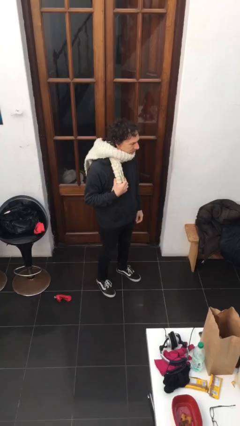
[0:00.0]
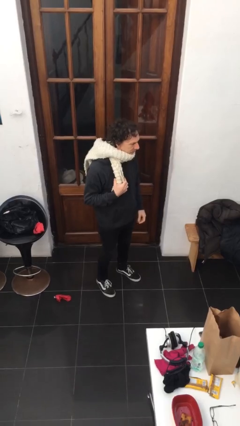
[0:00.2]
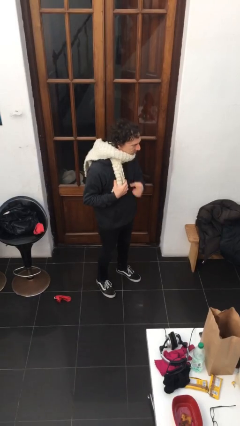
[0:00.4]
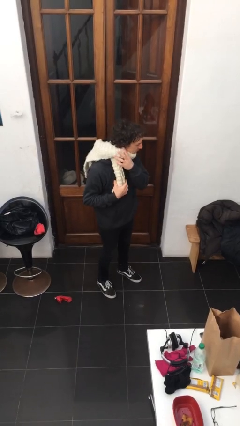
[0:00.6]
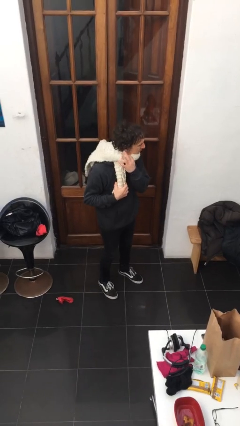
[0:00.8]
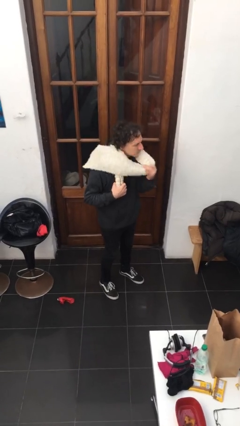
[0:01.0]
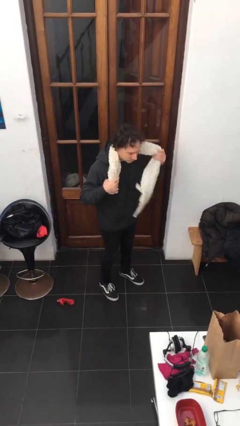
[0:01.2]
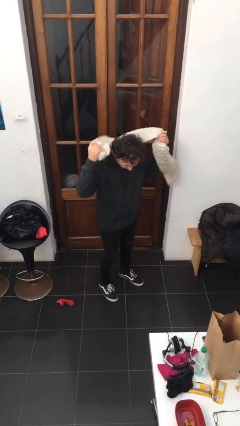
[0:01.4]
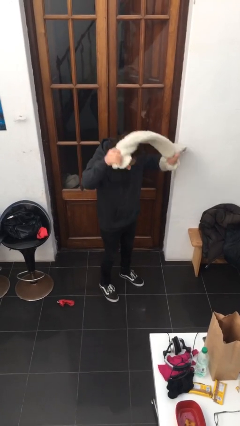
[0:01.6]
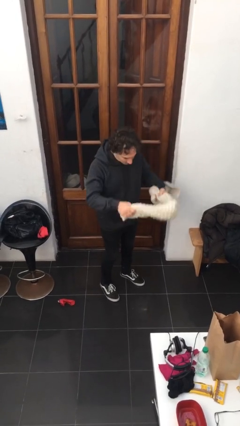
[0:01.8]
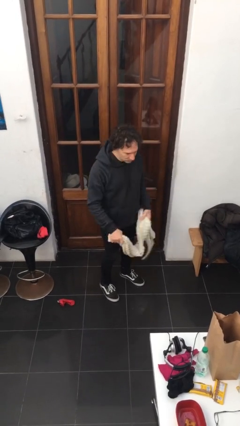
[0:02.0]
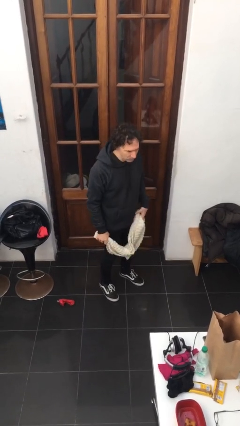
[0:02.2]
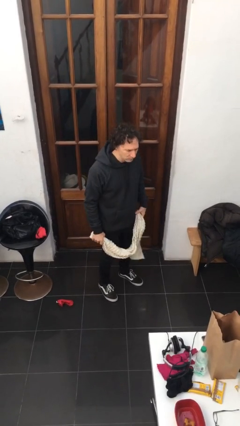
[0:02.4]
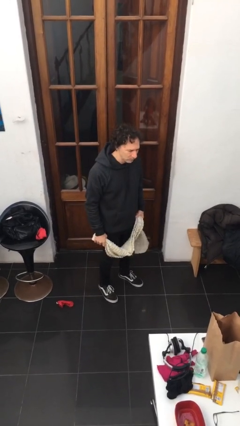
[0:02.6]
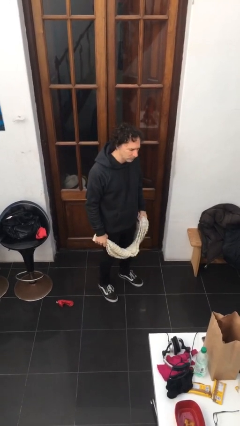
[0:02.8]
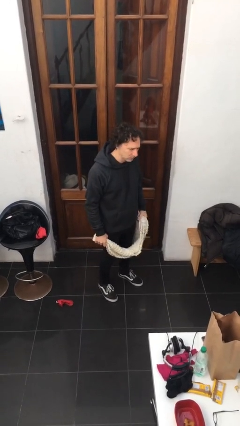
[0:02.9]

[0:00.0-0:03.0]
person takes off scarf

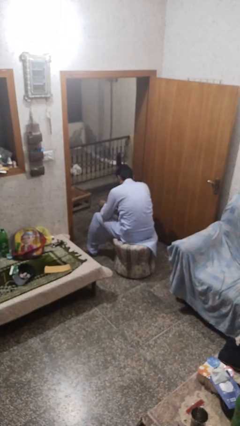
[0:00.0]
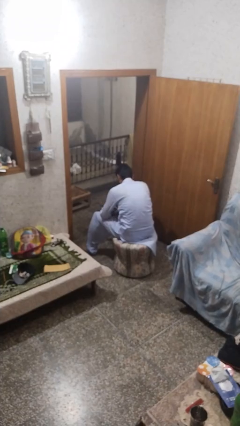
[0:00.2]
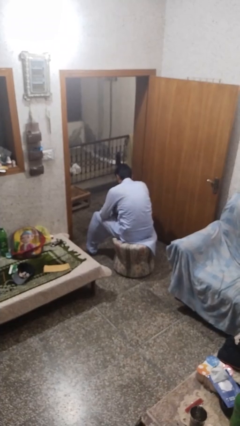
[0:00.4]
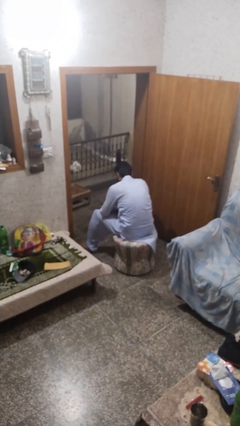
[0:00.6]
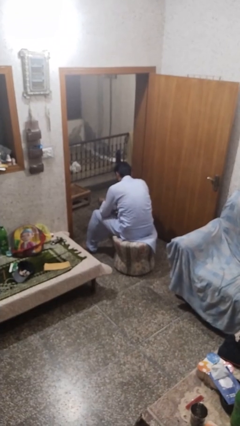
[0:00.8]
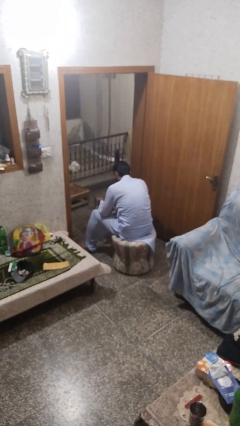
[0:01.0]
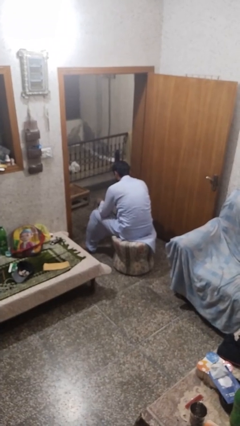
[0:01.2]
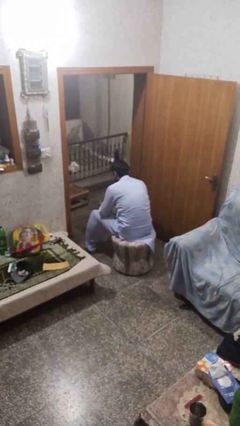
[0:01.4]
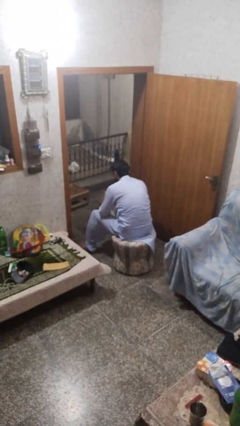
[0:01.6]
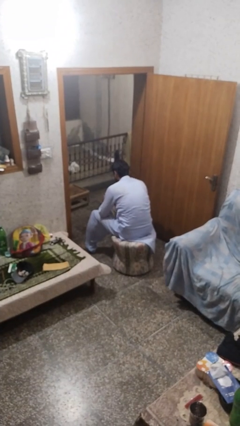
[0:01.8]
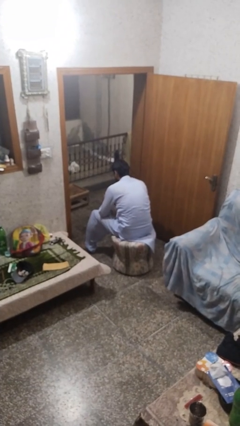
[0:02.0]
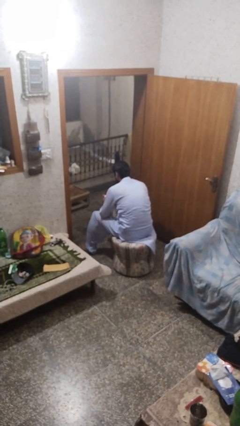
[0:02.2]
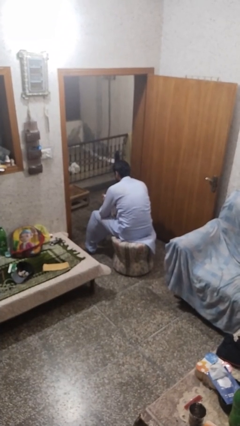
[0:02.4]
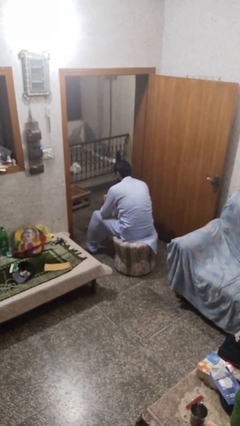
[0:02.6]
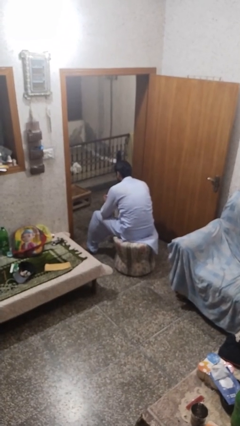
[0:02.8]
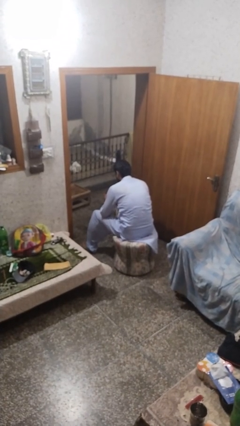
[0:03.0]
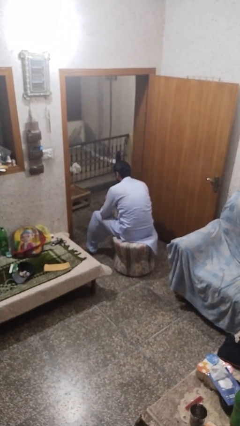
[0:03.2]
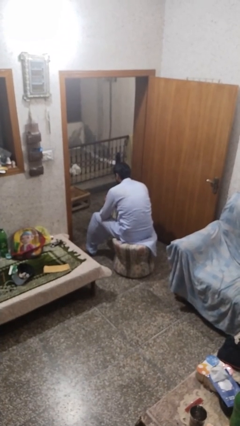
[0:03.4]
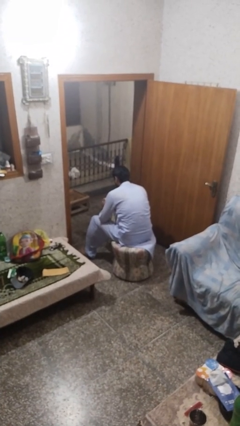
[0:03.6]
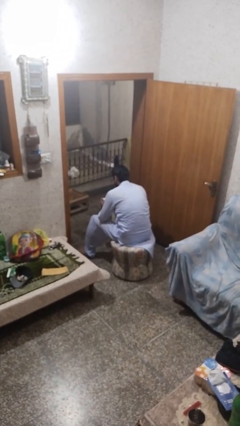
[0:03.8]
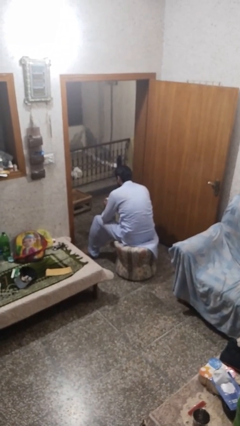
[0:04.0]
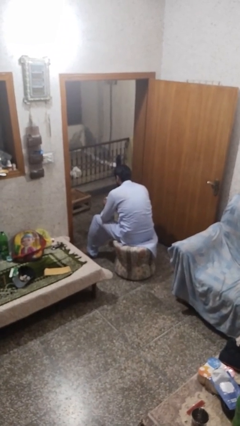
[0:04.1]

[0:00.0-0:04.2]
person takes object from purse

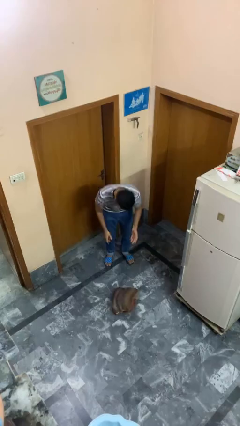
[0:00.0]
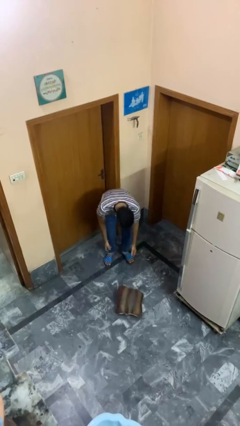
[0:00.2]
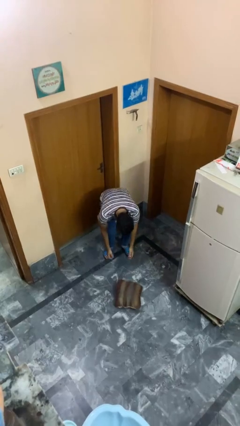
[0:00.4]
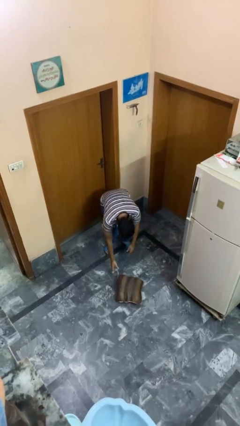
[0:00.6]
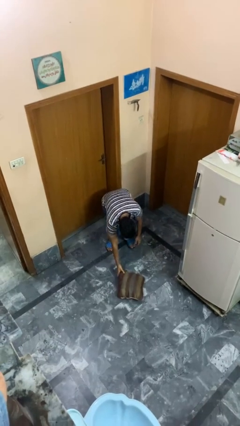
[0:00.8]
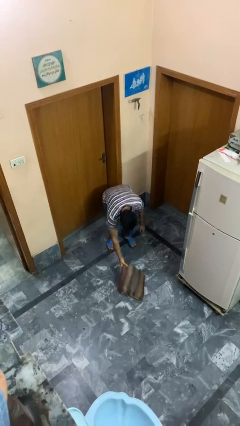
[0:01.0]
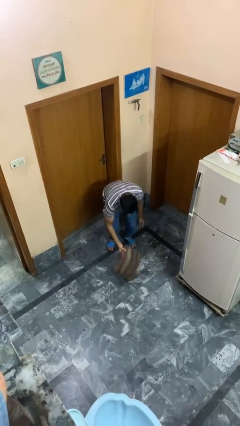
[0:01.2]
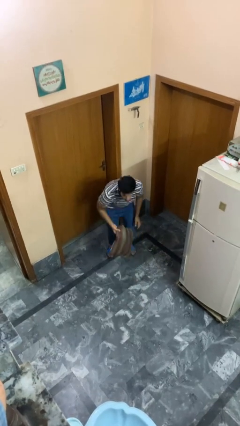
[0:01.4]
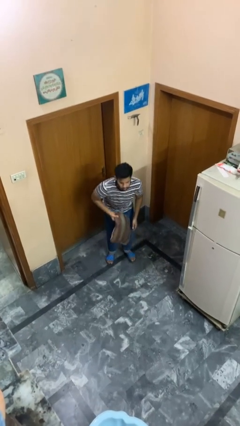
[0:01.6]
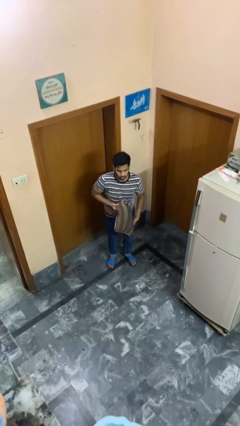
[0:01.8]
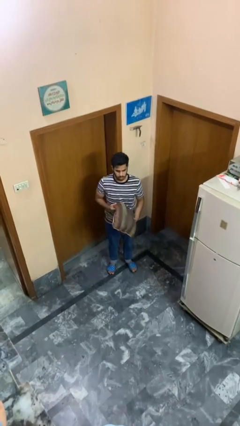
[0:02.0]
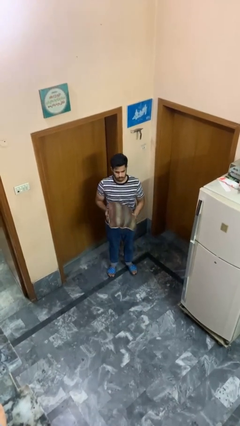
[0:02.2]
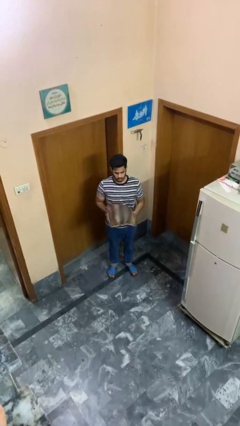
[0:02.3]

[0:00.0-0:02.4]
person picks up object from floor

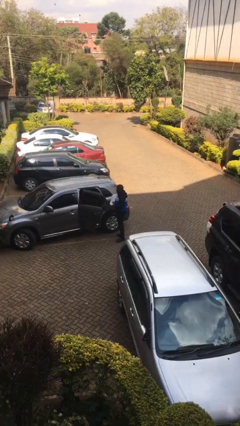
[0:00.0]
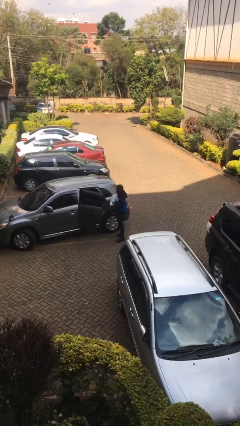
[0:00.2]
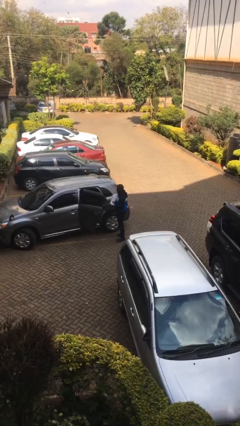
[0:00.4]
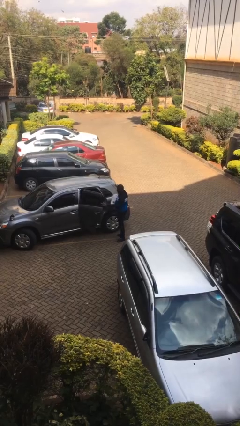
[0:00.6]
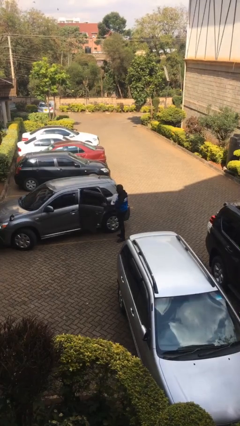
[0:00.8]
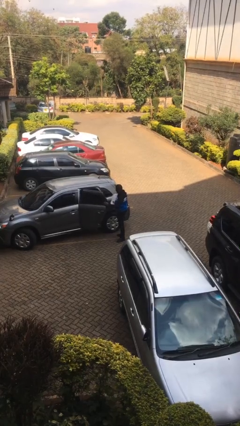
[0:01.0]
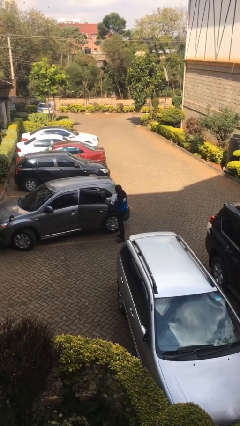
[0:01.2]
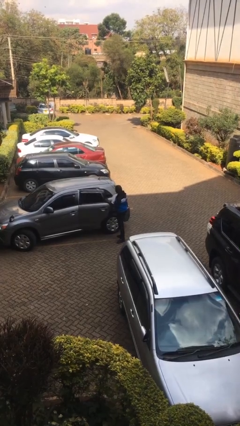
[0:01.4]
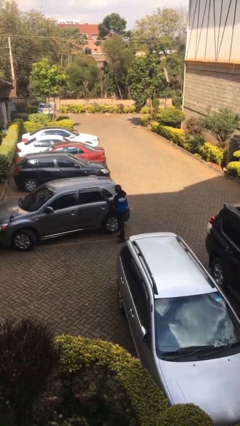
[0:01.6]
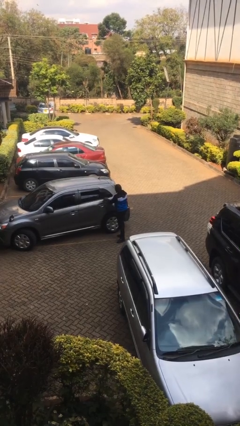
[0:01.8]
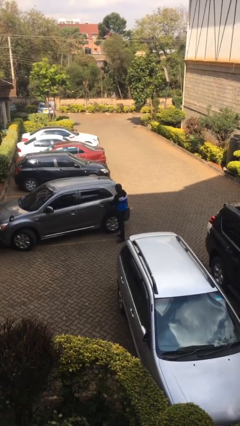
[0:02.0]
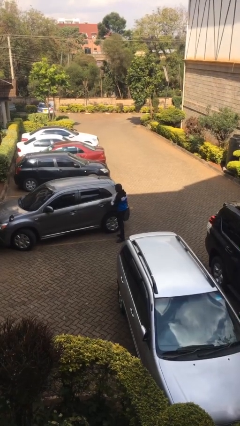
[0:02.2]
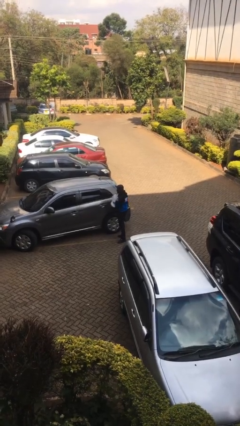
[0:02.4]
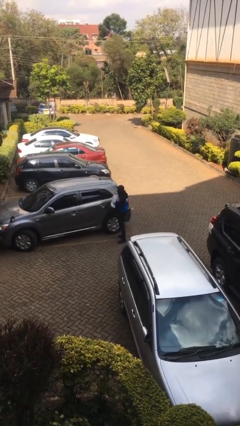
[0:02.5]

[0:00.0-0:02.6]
person closes car door

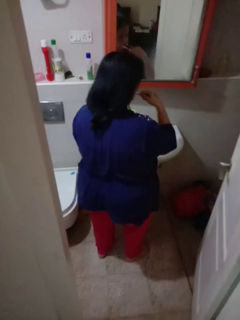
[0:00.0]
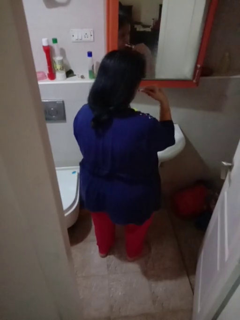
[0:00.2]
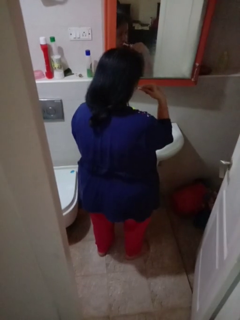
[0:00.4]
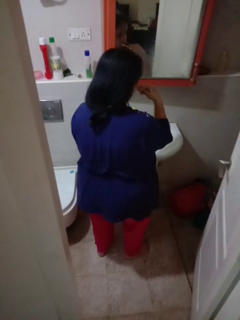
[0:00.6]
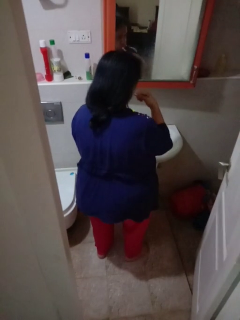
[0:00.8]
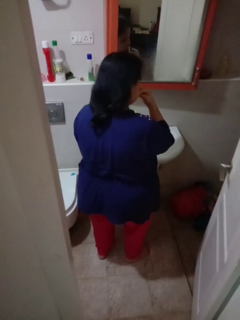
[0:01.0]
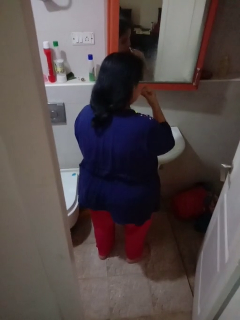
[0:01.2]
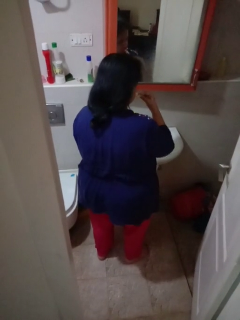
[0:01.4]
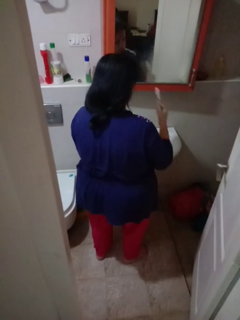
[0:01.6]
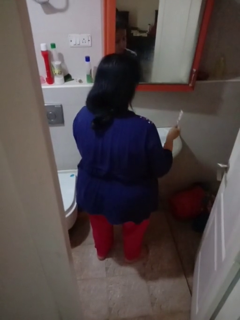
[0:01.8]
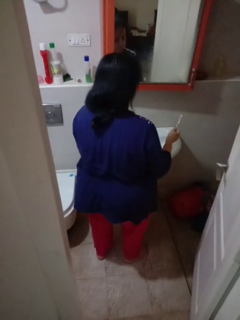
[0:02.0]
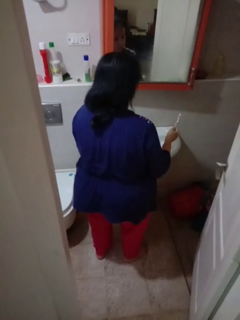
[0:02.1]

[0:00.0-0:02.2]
person brushes teeth

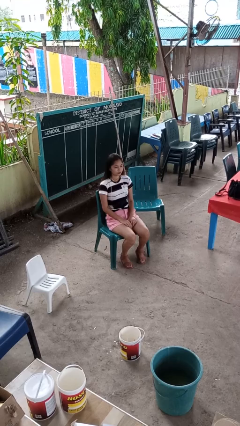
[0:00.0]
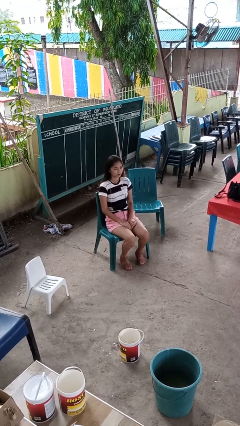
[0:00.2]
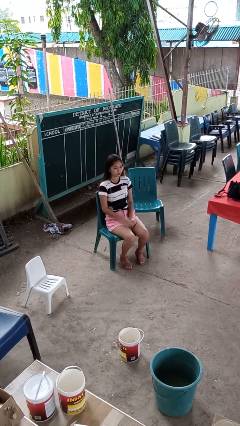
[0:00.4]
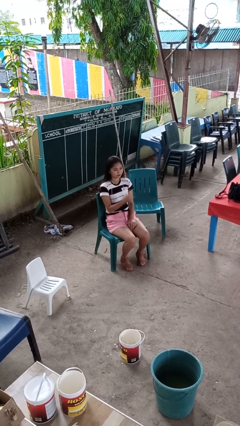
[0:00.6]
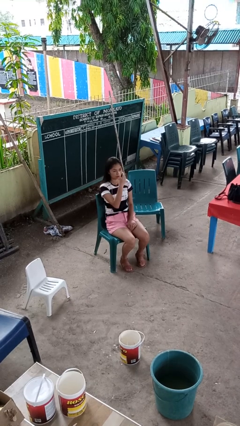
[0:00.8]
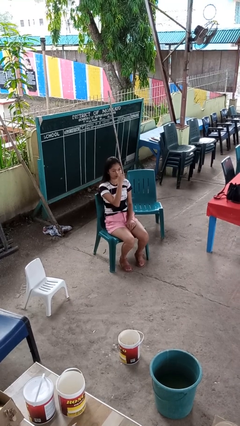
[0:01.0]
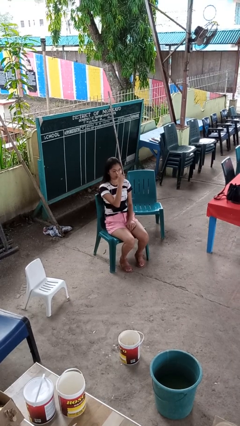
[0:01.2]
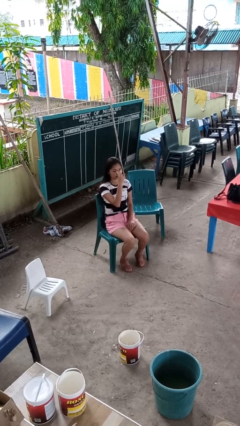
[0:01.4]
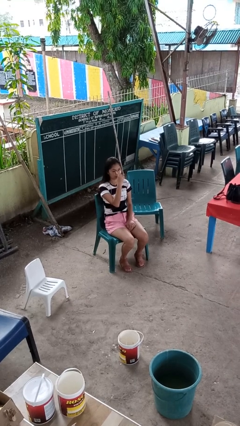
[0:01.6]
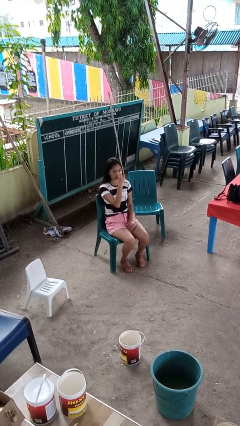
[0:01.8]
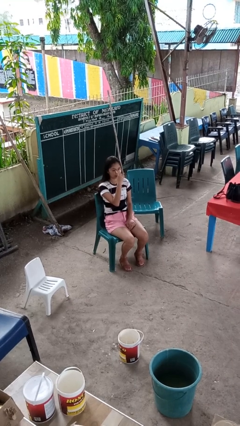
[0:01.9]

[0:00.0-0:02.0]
person gestures watch closely

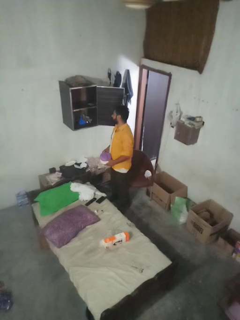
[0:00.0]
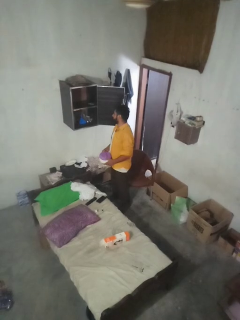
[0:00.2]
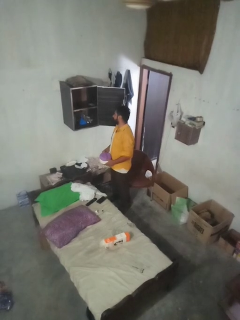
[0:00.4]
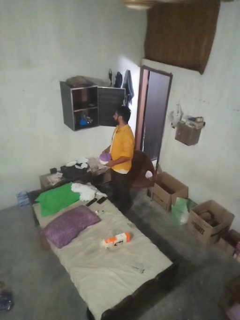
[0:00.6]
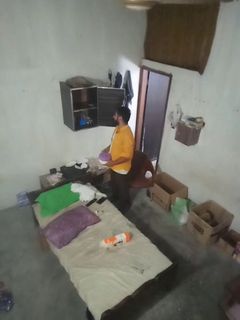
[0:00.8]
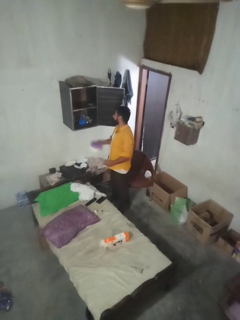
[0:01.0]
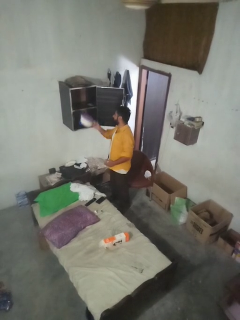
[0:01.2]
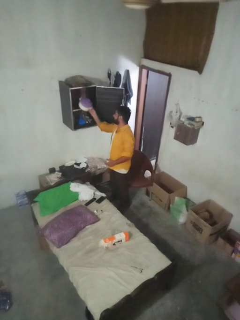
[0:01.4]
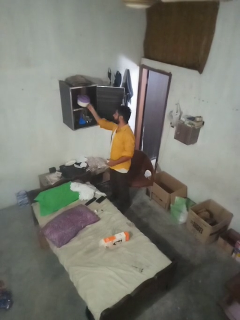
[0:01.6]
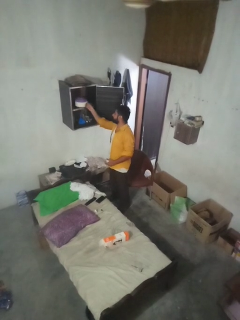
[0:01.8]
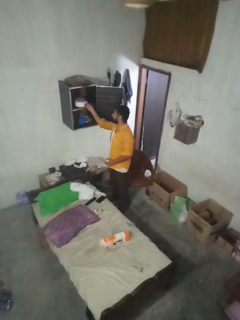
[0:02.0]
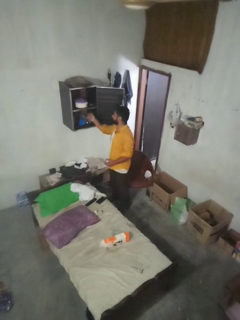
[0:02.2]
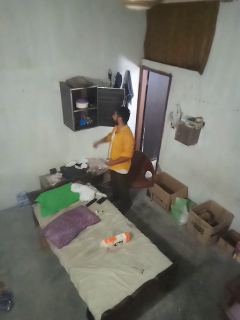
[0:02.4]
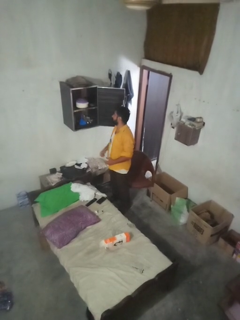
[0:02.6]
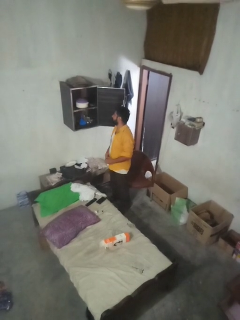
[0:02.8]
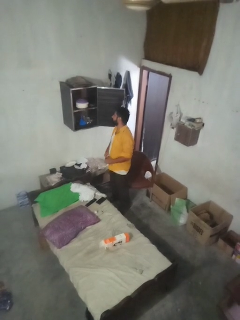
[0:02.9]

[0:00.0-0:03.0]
person loads groceries into refrigerator
